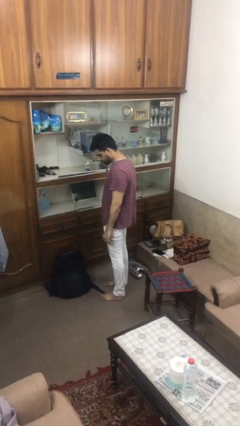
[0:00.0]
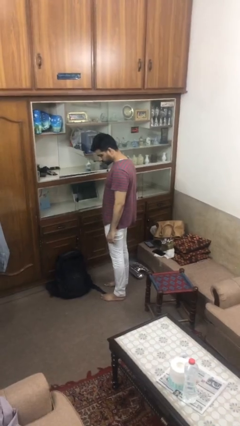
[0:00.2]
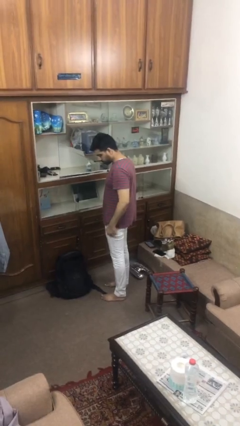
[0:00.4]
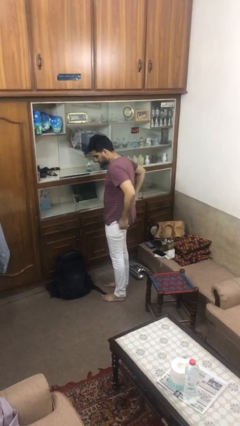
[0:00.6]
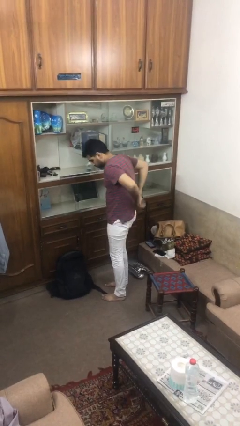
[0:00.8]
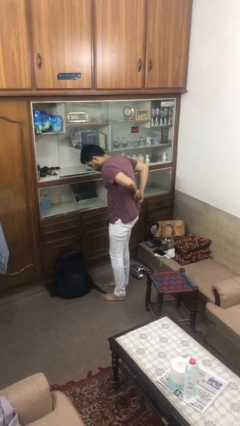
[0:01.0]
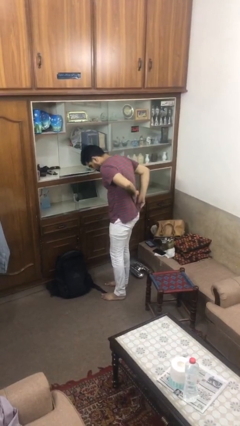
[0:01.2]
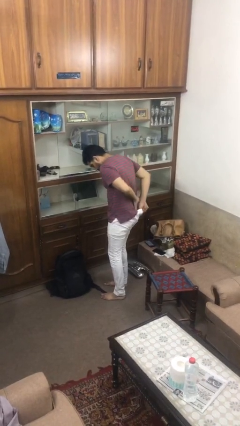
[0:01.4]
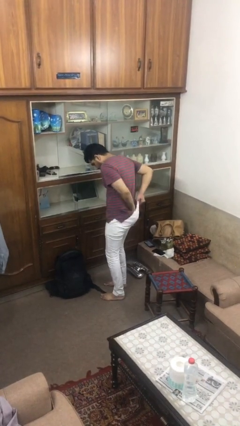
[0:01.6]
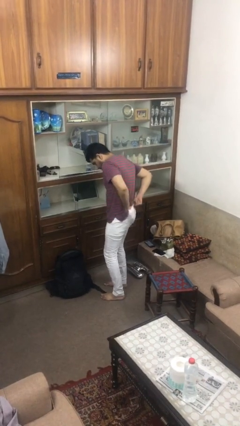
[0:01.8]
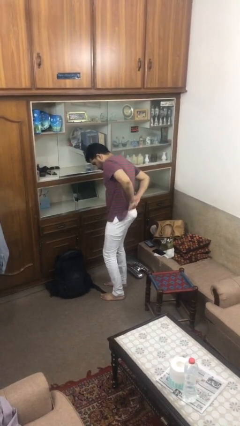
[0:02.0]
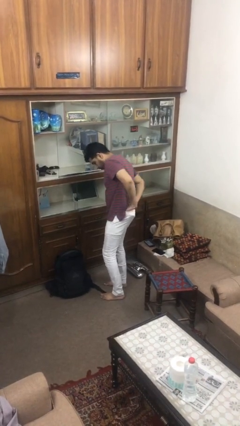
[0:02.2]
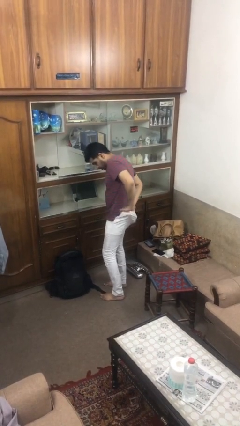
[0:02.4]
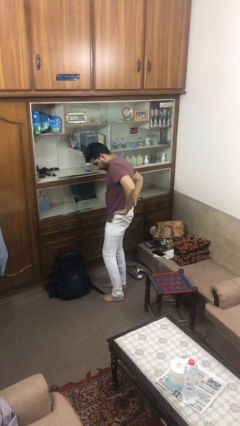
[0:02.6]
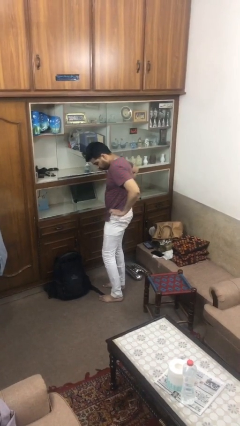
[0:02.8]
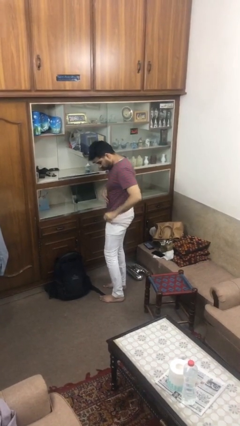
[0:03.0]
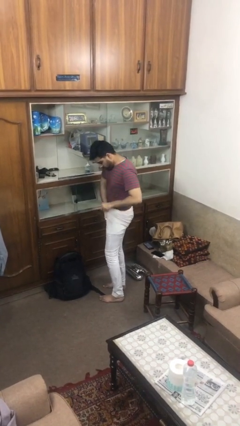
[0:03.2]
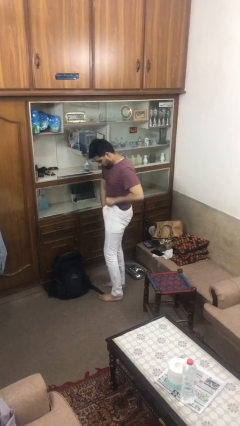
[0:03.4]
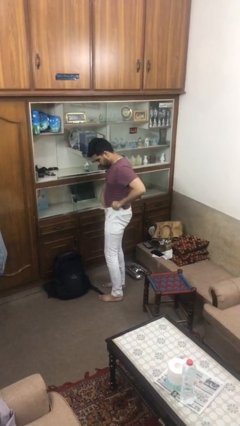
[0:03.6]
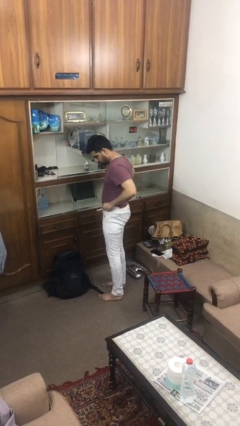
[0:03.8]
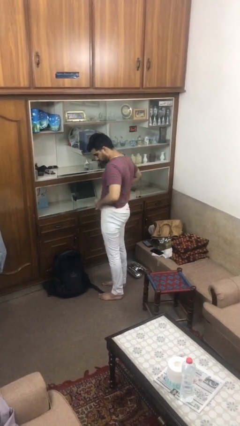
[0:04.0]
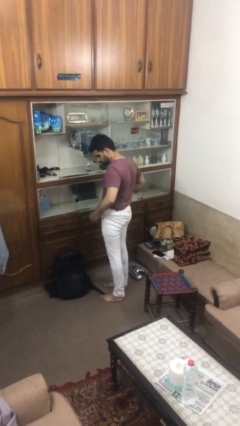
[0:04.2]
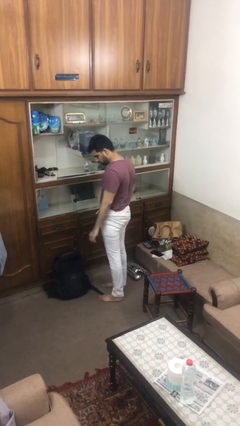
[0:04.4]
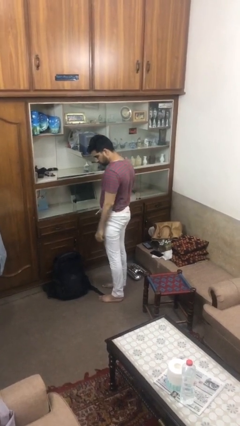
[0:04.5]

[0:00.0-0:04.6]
person tucks in shirt

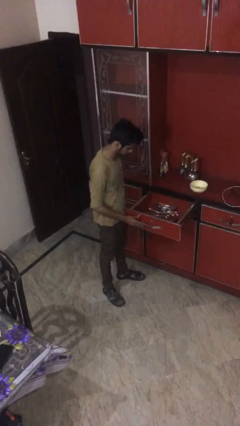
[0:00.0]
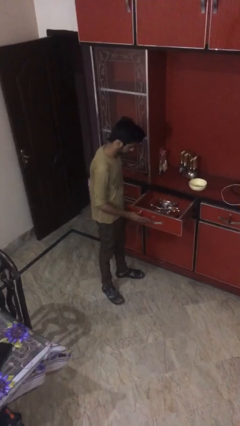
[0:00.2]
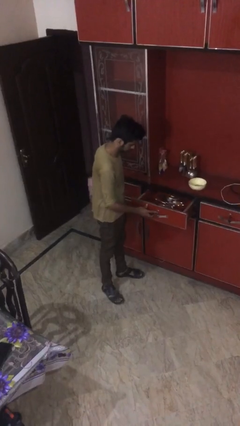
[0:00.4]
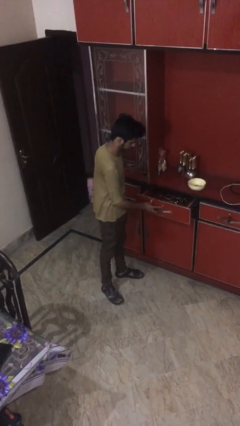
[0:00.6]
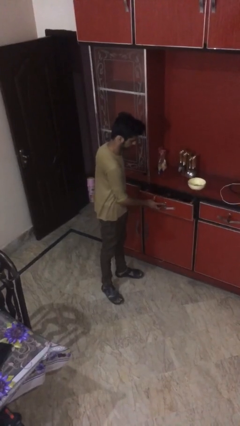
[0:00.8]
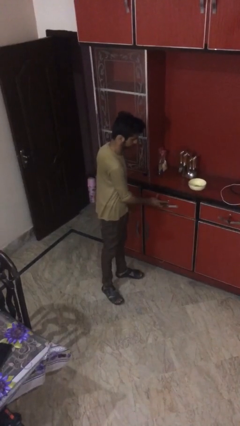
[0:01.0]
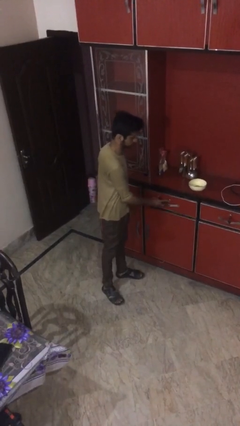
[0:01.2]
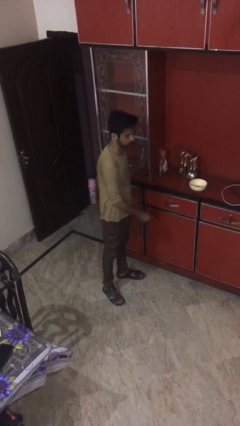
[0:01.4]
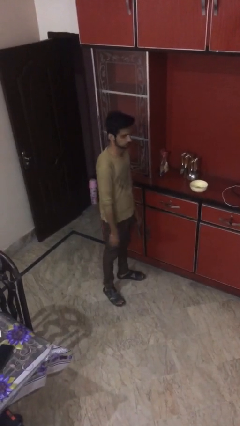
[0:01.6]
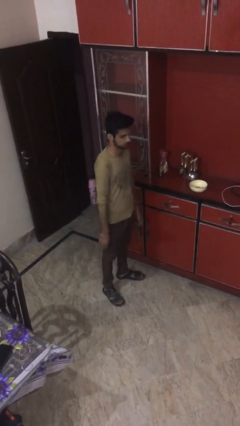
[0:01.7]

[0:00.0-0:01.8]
person closes kitchen drawer

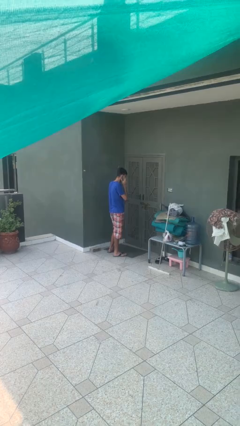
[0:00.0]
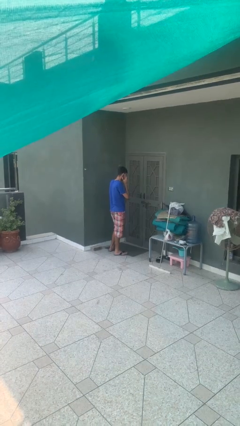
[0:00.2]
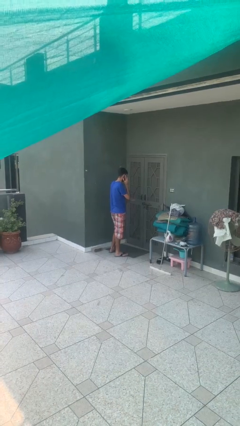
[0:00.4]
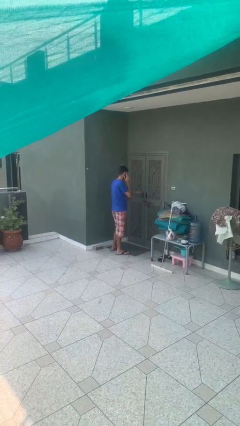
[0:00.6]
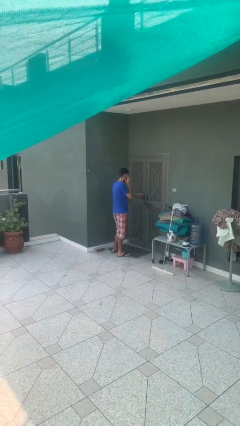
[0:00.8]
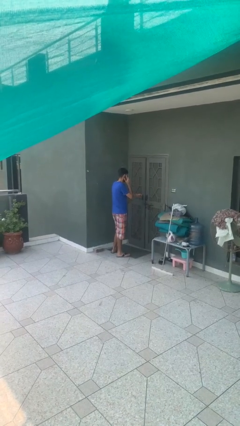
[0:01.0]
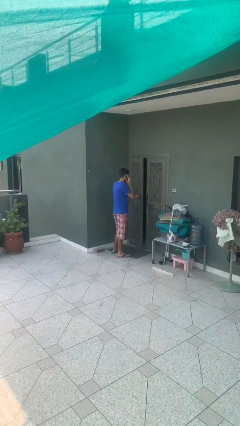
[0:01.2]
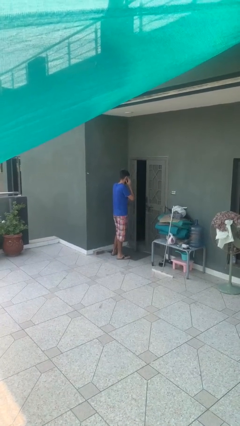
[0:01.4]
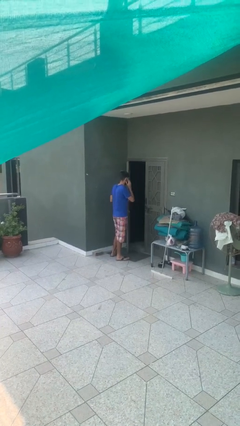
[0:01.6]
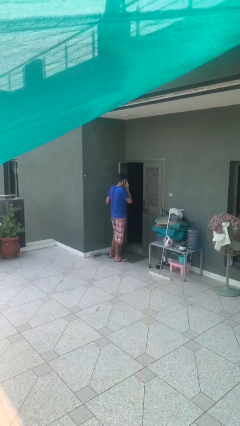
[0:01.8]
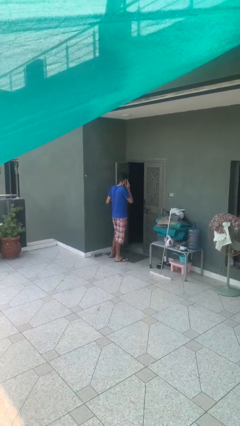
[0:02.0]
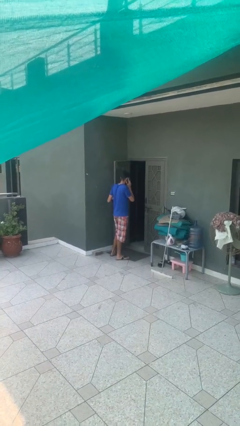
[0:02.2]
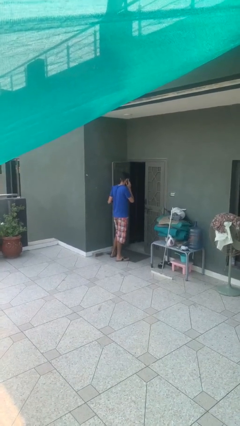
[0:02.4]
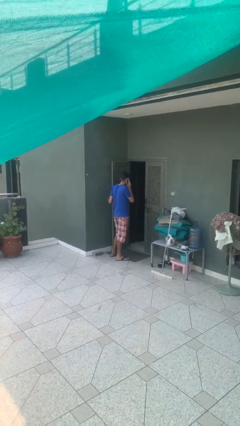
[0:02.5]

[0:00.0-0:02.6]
person opens facility door

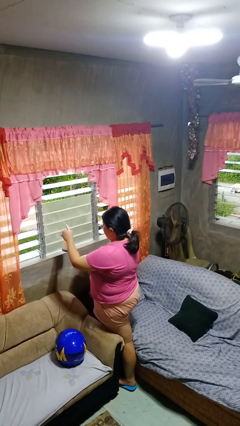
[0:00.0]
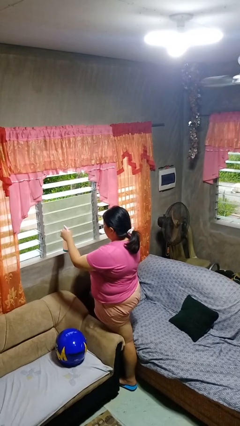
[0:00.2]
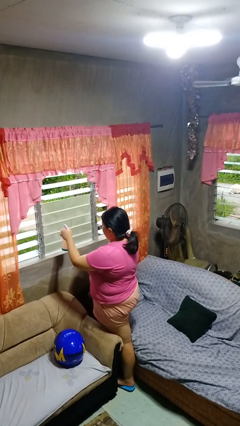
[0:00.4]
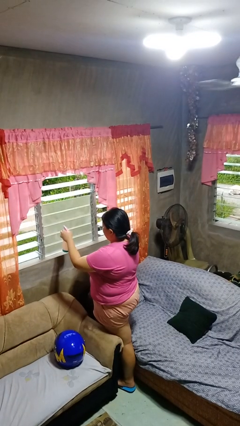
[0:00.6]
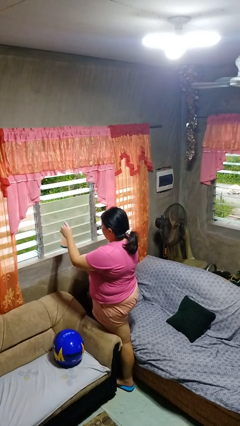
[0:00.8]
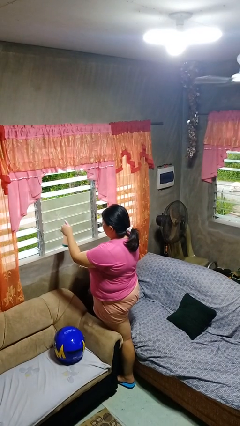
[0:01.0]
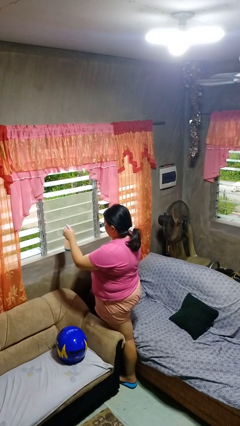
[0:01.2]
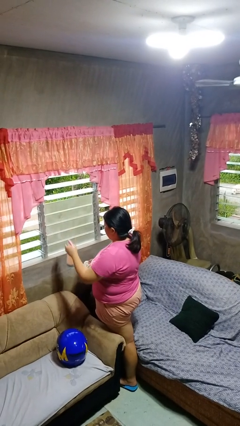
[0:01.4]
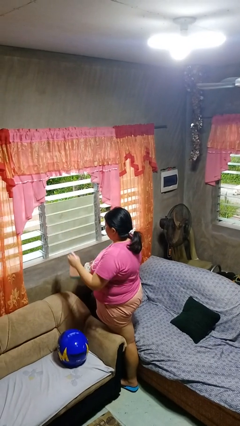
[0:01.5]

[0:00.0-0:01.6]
person sprays from bottle

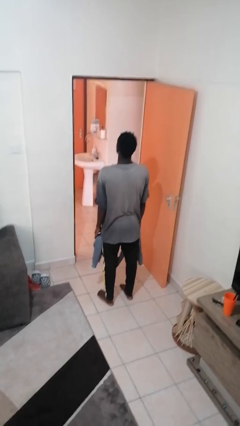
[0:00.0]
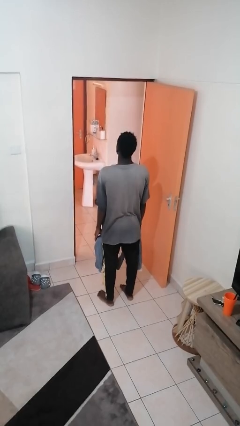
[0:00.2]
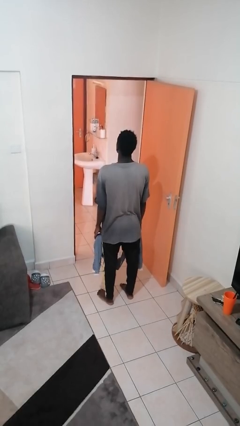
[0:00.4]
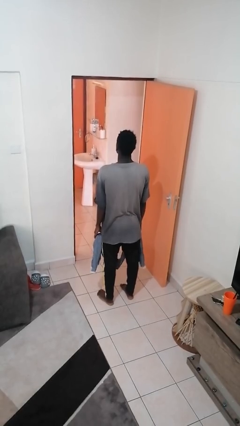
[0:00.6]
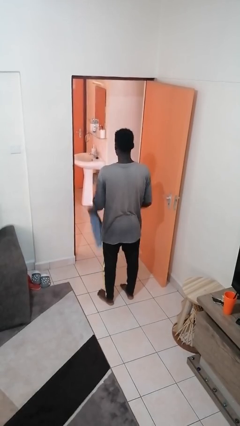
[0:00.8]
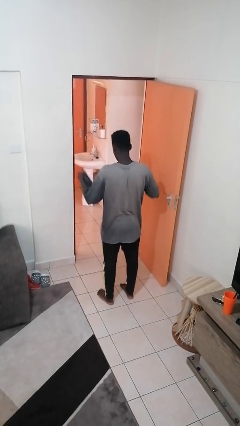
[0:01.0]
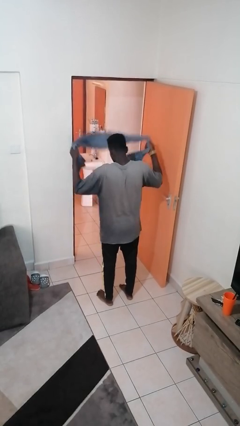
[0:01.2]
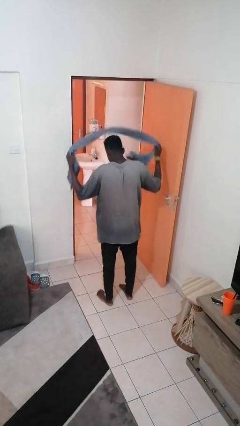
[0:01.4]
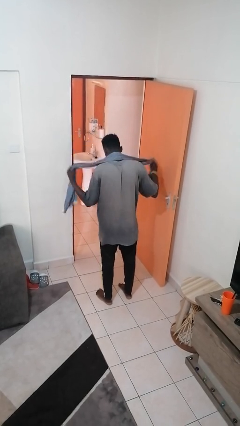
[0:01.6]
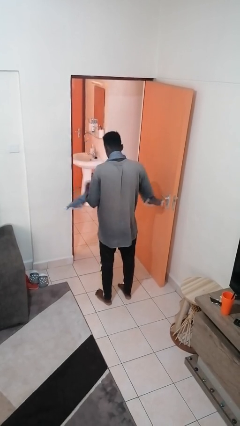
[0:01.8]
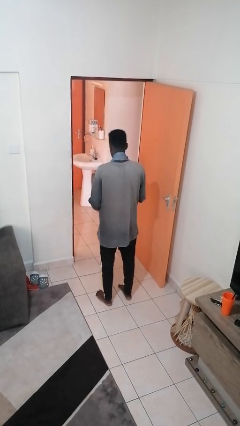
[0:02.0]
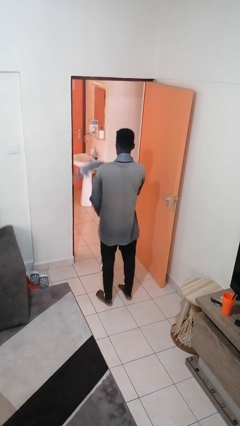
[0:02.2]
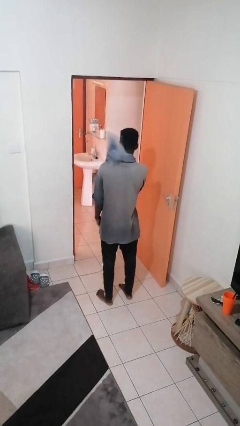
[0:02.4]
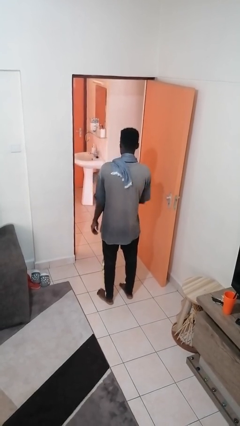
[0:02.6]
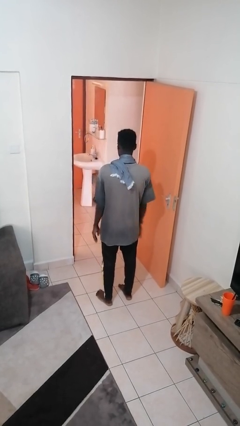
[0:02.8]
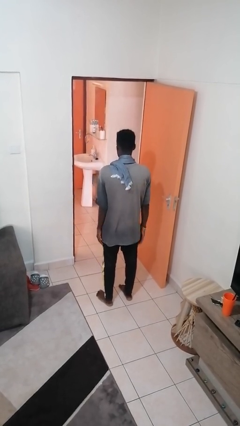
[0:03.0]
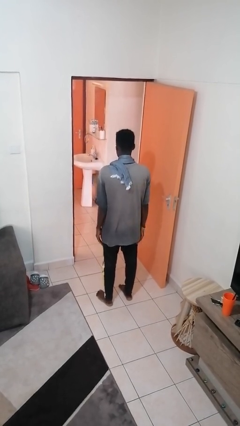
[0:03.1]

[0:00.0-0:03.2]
person puts on scarf

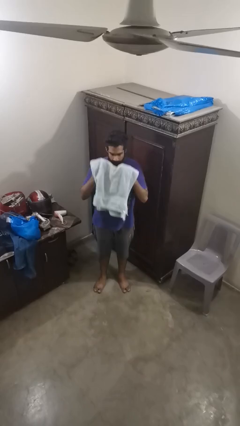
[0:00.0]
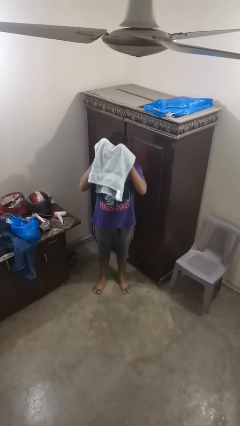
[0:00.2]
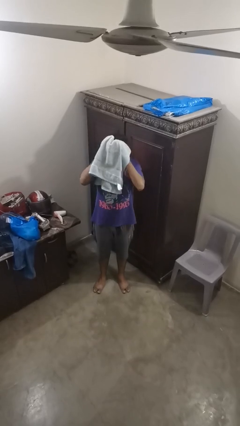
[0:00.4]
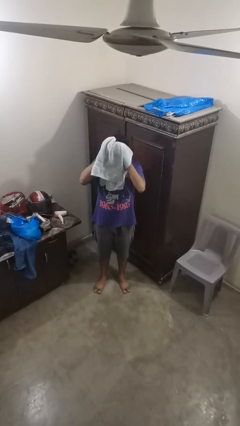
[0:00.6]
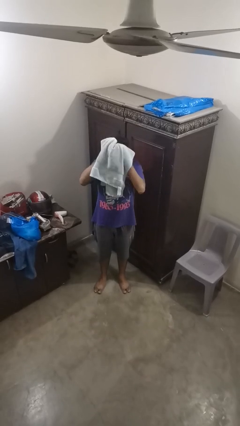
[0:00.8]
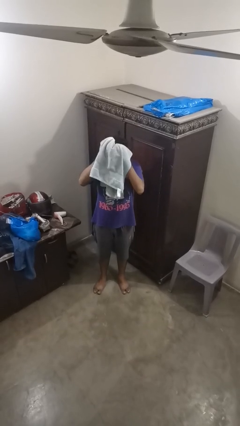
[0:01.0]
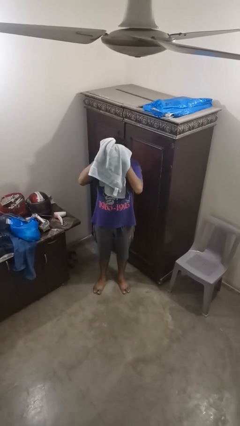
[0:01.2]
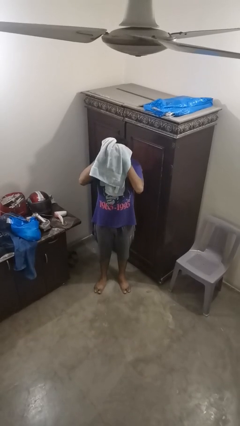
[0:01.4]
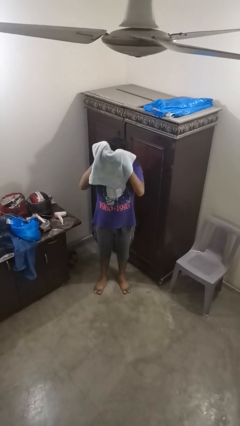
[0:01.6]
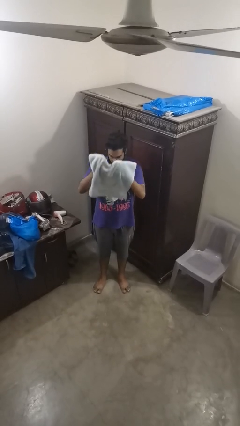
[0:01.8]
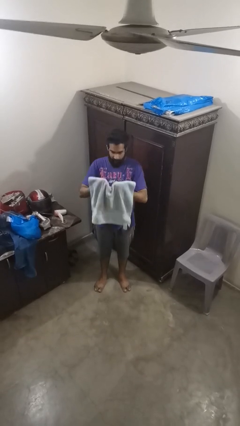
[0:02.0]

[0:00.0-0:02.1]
person dries hair with towel

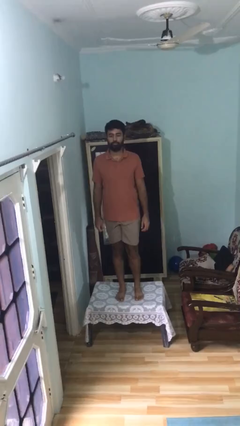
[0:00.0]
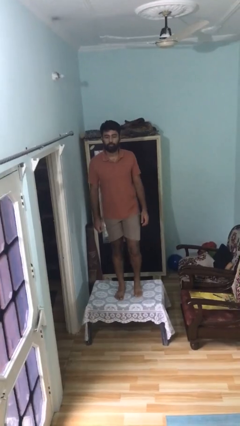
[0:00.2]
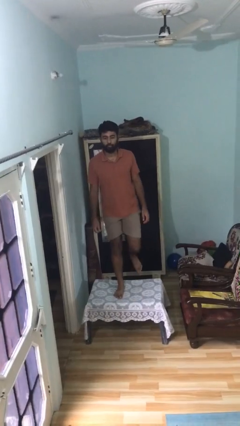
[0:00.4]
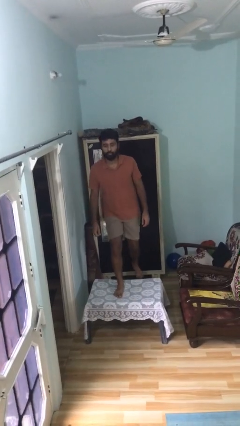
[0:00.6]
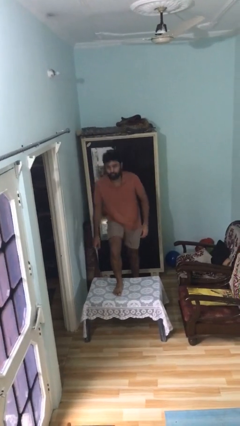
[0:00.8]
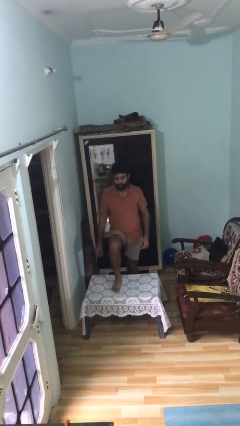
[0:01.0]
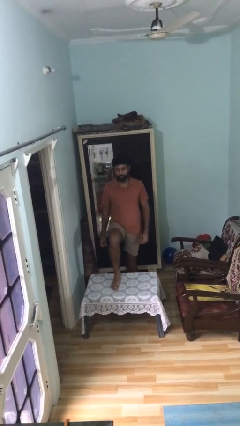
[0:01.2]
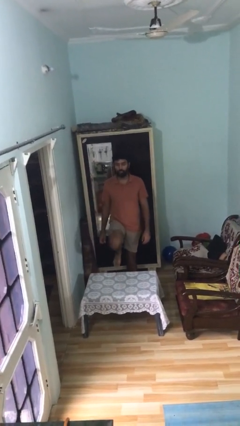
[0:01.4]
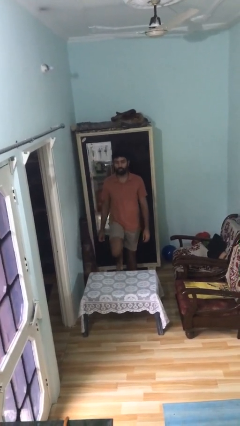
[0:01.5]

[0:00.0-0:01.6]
person climbs off table
